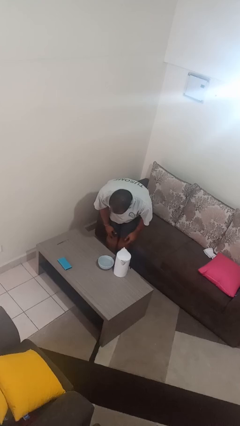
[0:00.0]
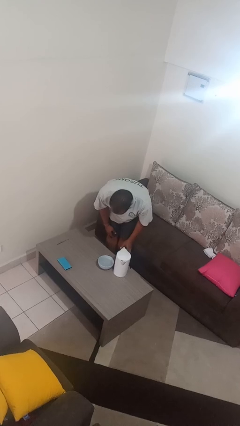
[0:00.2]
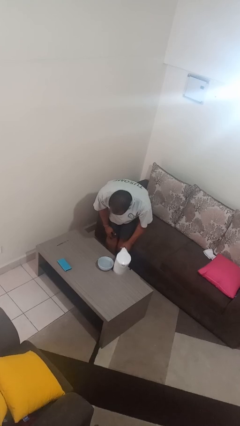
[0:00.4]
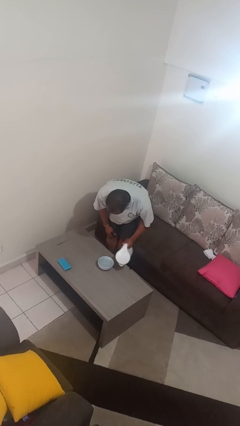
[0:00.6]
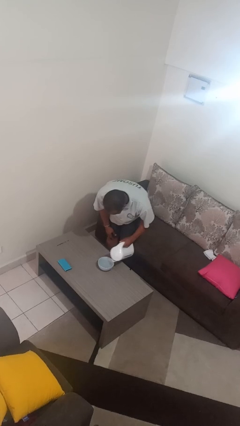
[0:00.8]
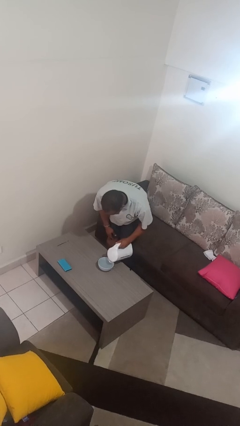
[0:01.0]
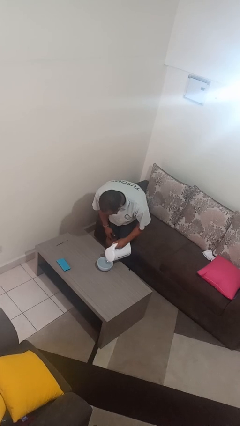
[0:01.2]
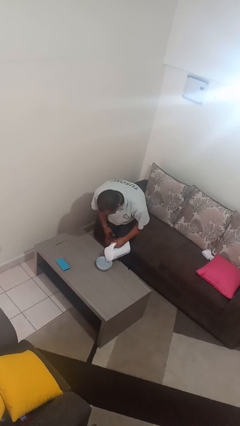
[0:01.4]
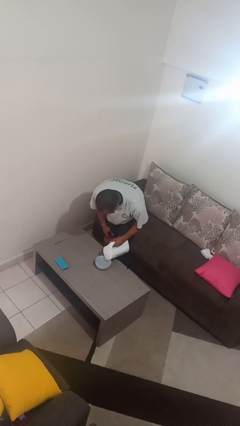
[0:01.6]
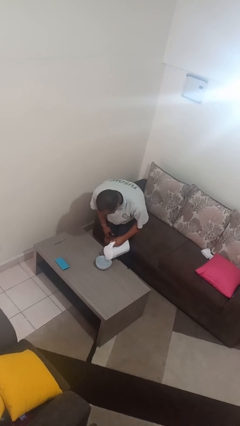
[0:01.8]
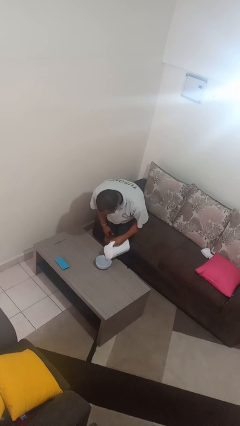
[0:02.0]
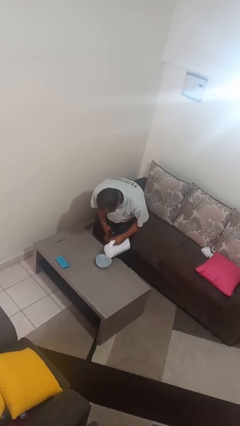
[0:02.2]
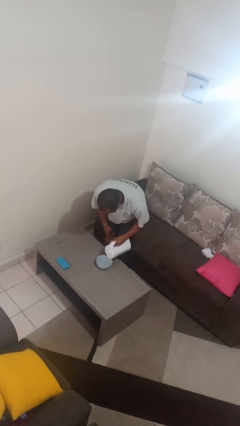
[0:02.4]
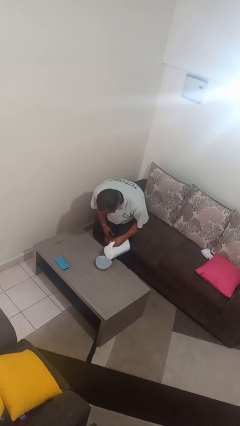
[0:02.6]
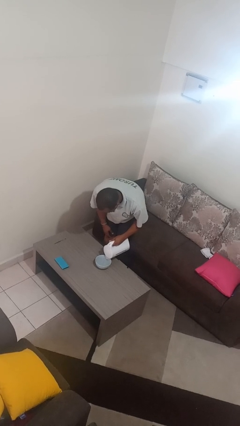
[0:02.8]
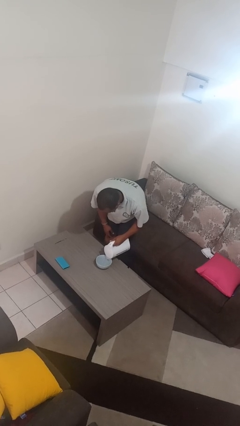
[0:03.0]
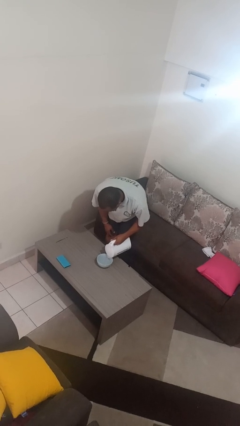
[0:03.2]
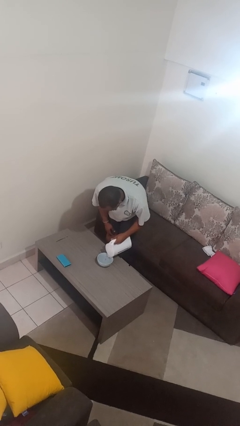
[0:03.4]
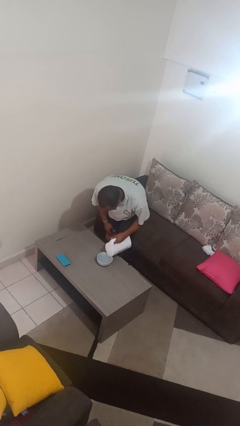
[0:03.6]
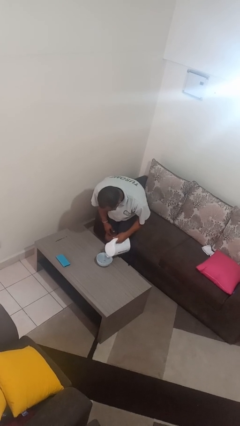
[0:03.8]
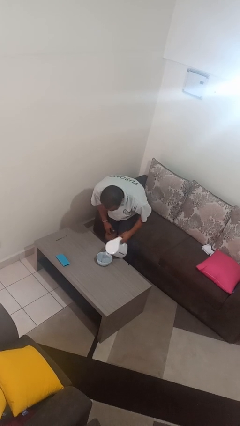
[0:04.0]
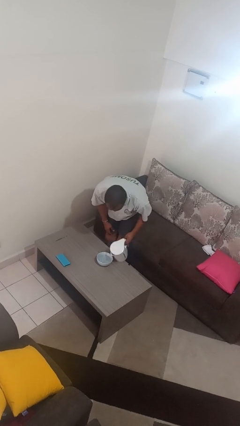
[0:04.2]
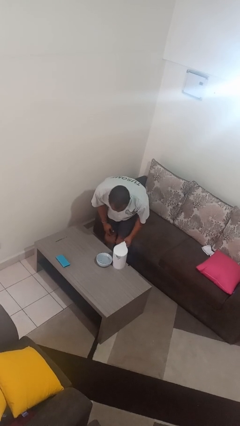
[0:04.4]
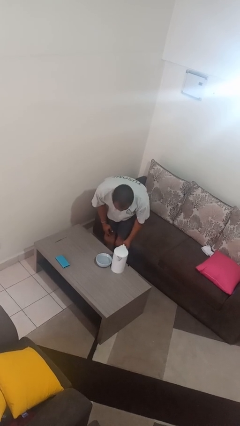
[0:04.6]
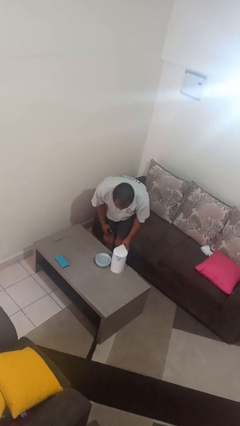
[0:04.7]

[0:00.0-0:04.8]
person pours into bowl

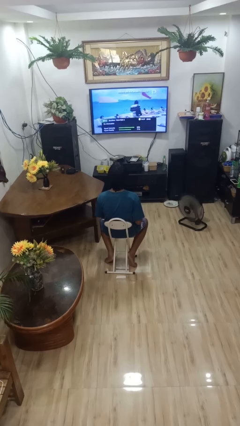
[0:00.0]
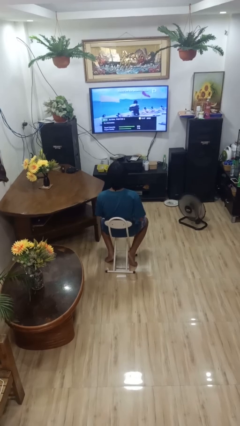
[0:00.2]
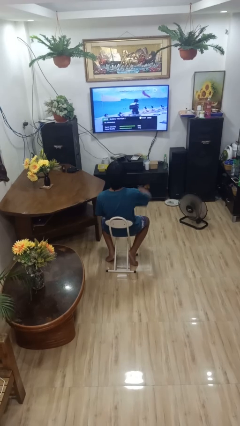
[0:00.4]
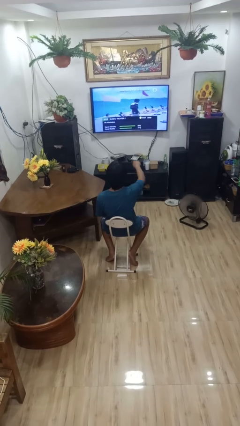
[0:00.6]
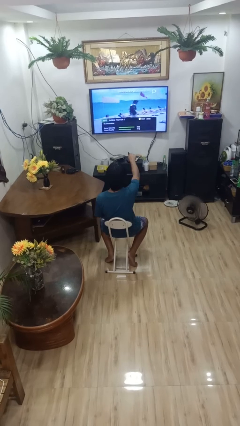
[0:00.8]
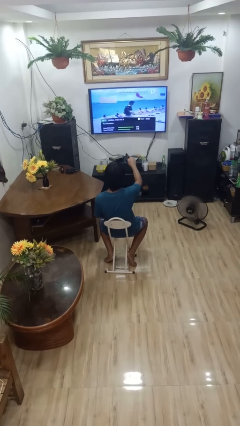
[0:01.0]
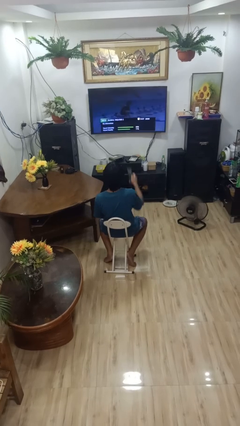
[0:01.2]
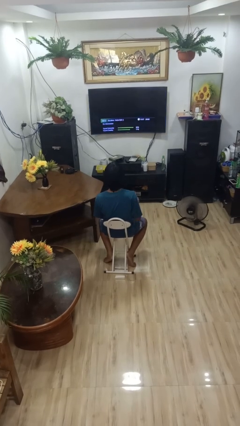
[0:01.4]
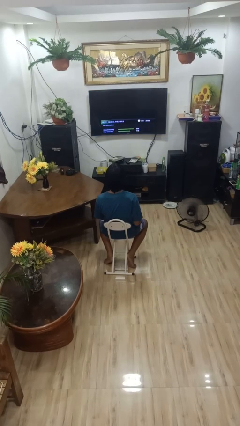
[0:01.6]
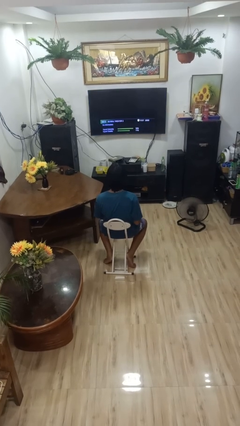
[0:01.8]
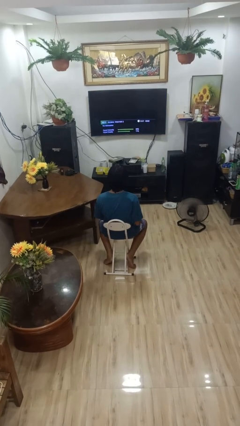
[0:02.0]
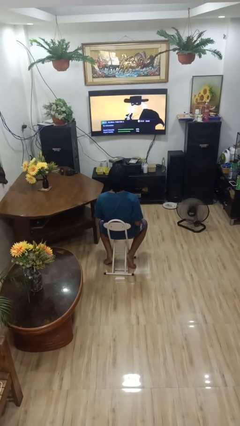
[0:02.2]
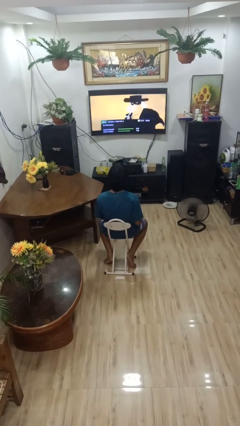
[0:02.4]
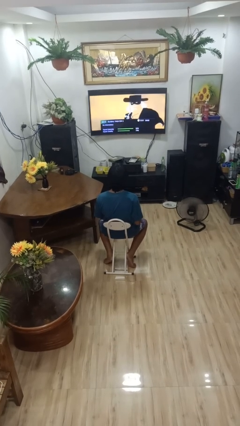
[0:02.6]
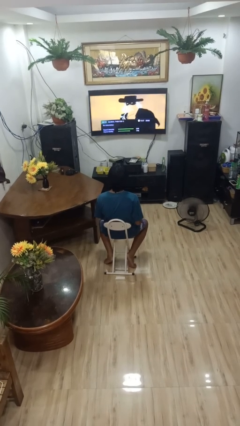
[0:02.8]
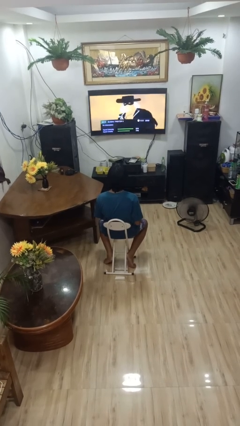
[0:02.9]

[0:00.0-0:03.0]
person uses television remote

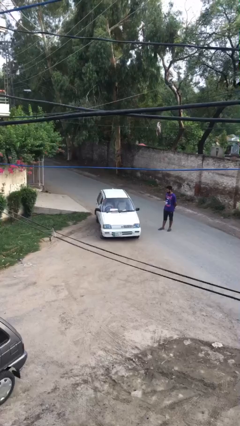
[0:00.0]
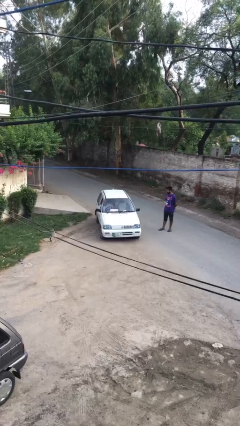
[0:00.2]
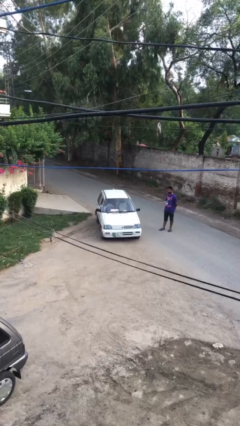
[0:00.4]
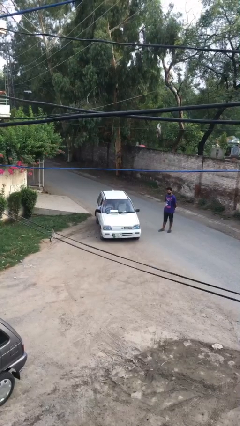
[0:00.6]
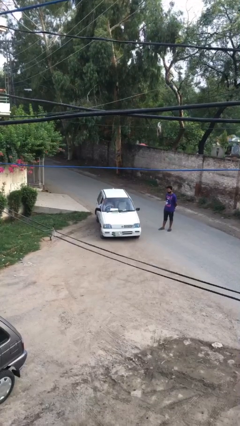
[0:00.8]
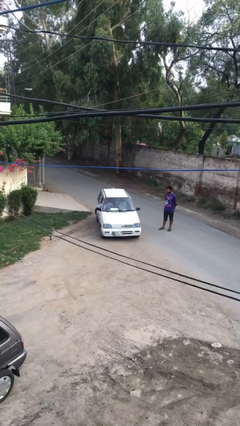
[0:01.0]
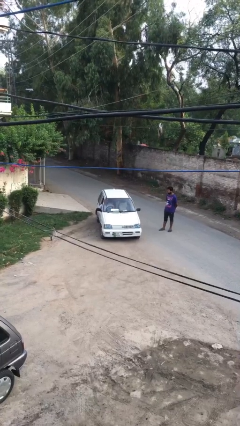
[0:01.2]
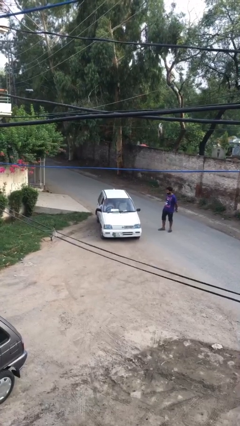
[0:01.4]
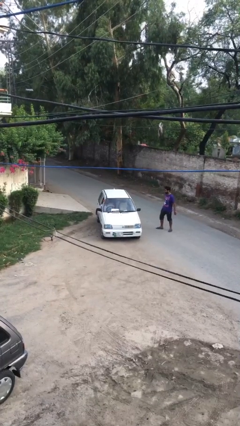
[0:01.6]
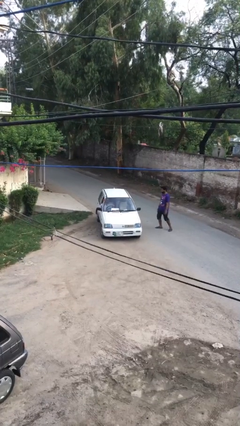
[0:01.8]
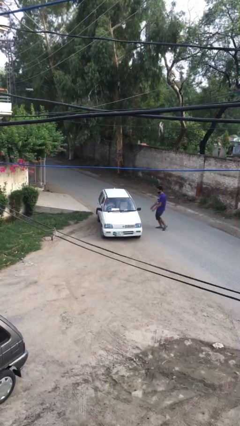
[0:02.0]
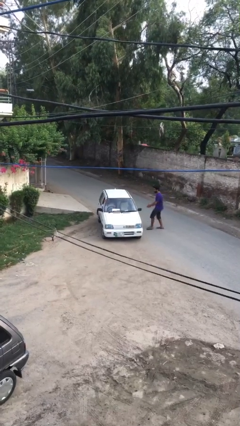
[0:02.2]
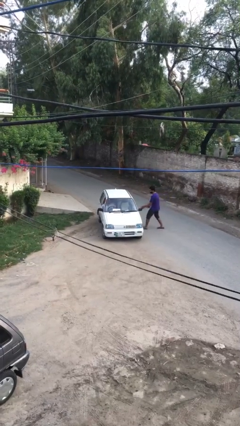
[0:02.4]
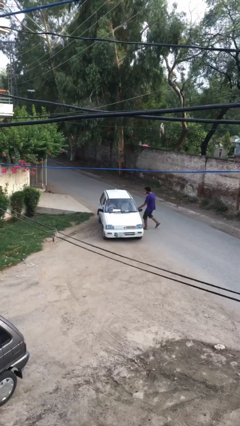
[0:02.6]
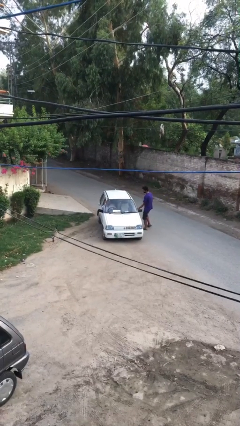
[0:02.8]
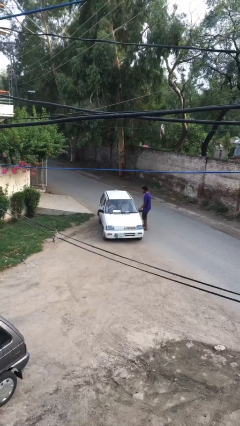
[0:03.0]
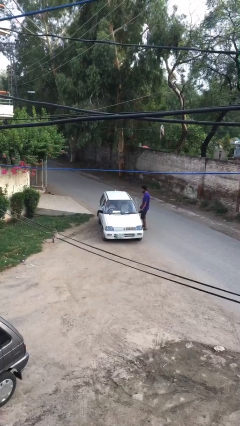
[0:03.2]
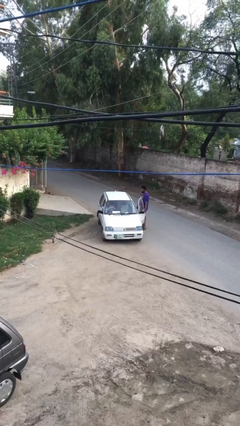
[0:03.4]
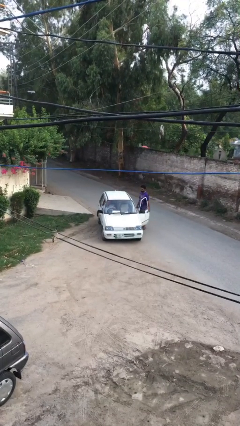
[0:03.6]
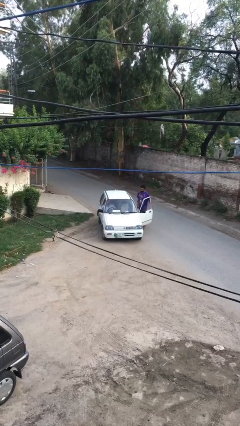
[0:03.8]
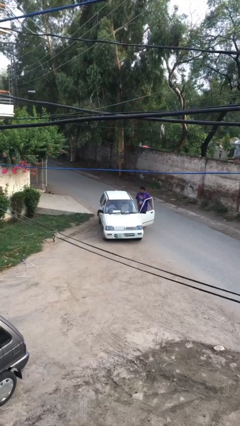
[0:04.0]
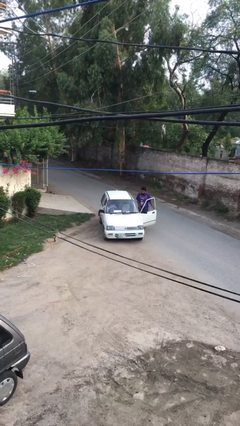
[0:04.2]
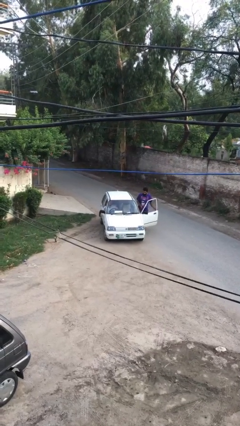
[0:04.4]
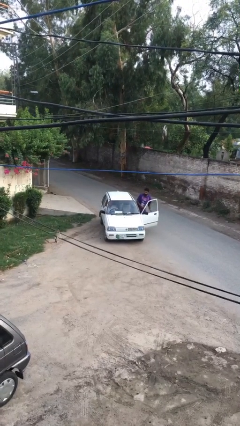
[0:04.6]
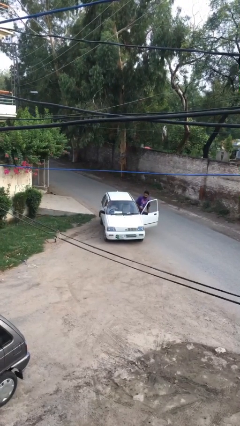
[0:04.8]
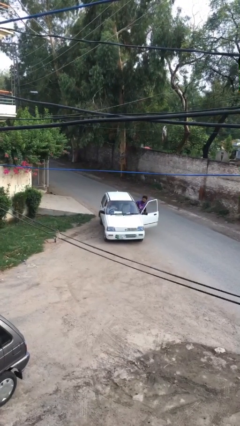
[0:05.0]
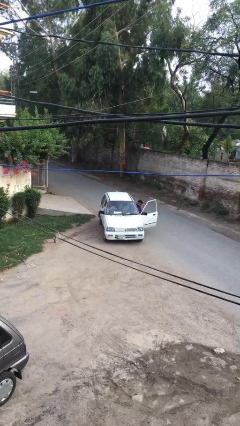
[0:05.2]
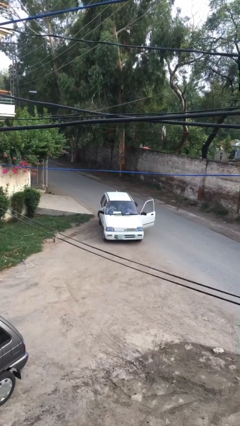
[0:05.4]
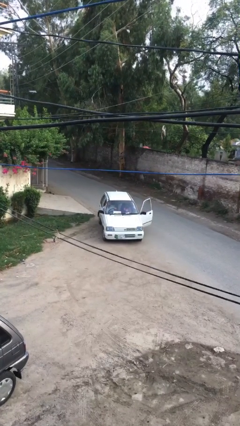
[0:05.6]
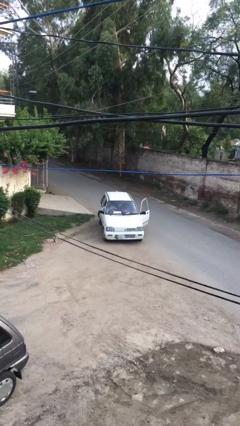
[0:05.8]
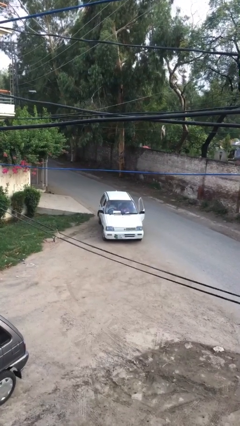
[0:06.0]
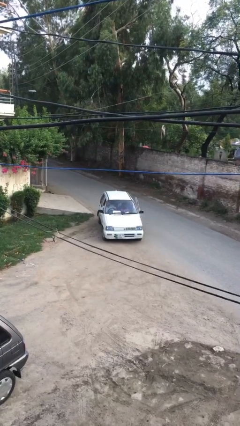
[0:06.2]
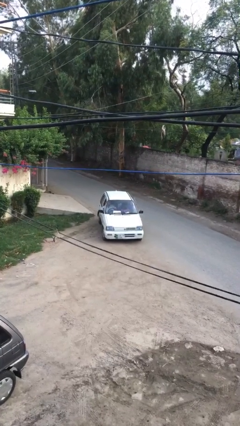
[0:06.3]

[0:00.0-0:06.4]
car picks up person

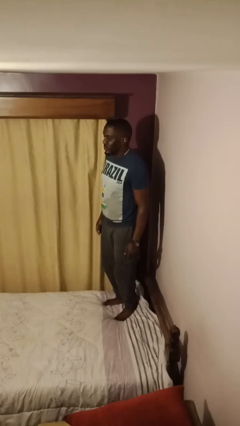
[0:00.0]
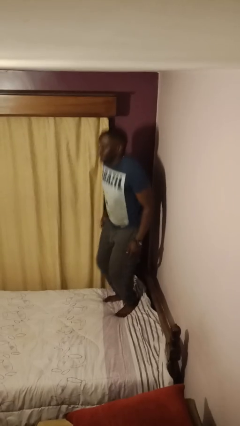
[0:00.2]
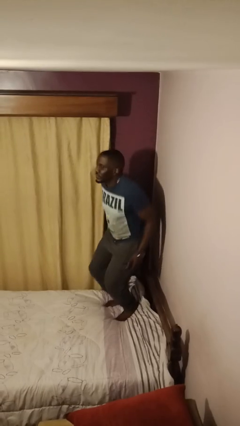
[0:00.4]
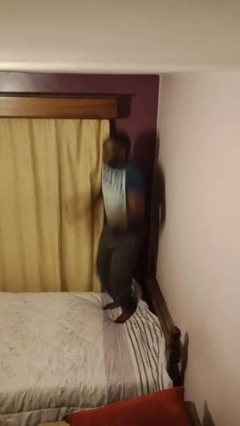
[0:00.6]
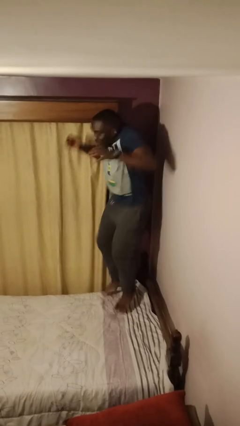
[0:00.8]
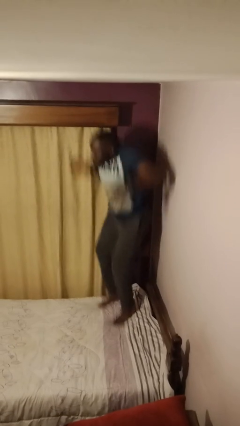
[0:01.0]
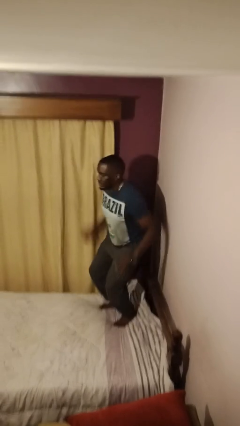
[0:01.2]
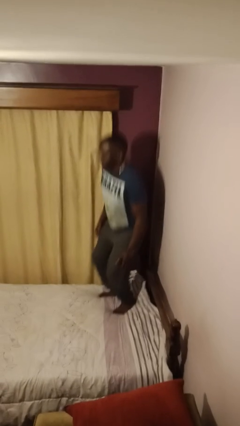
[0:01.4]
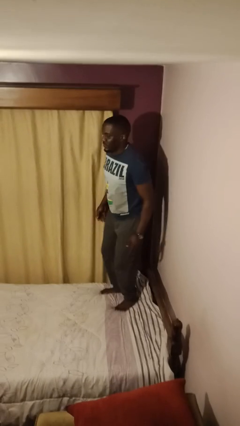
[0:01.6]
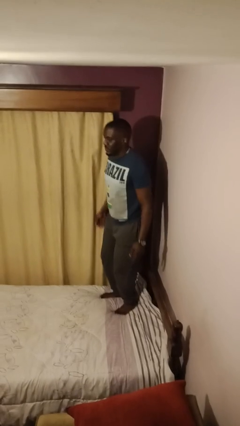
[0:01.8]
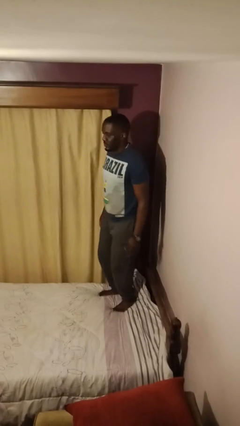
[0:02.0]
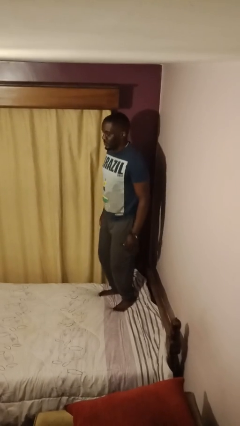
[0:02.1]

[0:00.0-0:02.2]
person jumps on bed

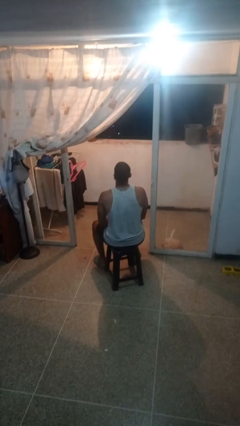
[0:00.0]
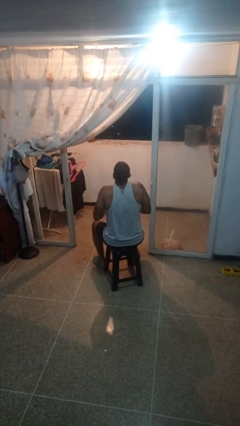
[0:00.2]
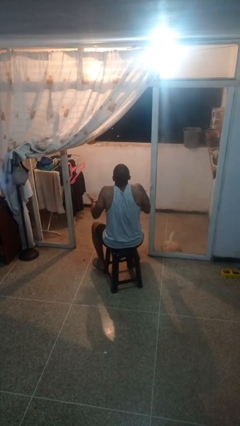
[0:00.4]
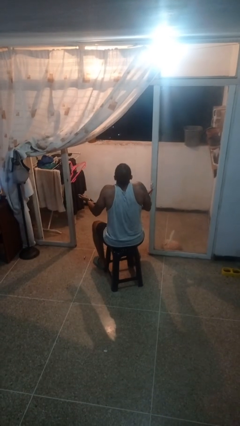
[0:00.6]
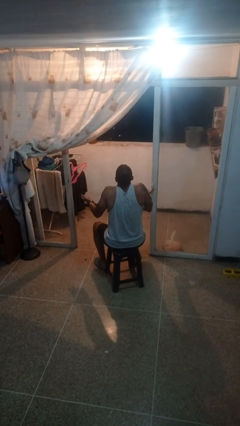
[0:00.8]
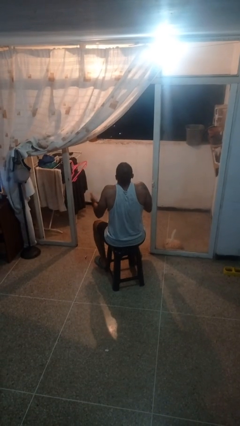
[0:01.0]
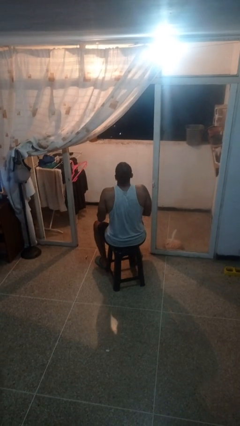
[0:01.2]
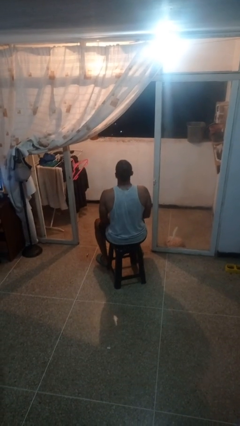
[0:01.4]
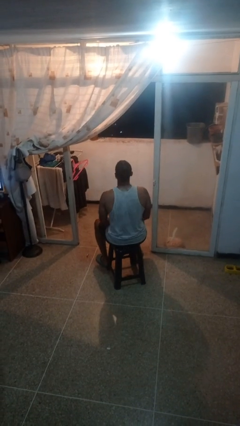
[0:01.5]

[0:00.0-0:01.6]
person shrugs
